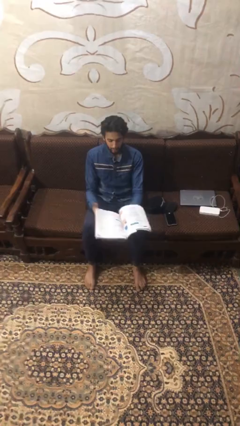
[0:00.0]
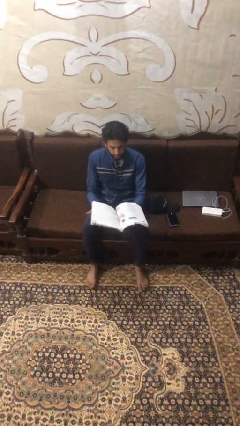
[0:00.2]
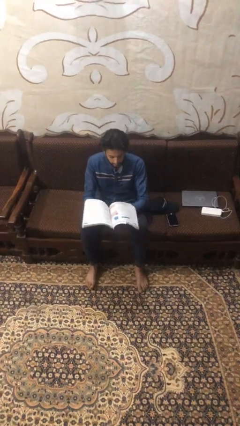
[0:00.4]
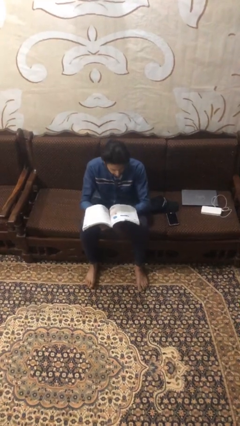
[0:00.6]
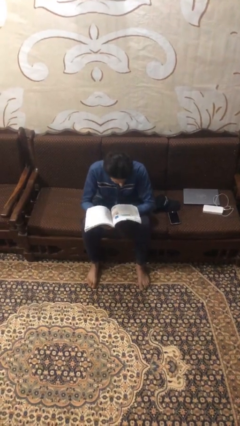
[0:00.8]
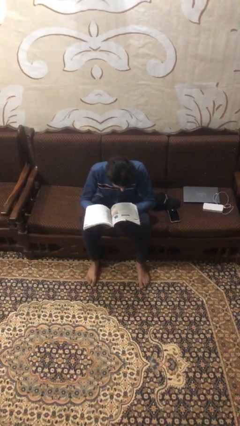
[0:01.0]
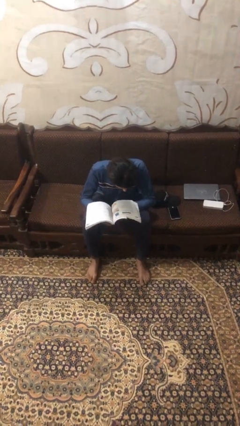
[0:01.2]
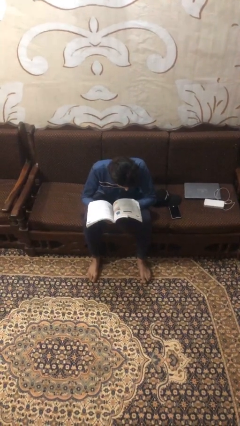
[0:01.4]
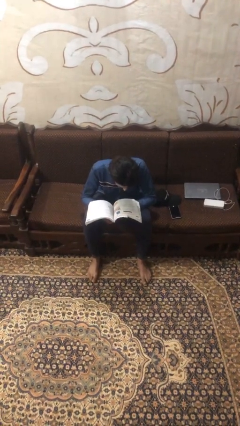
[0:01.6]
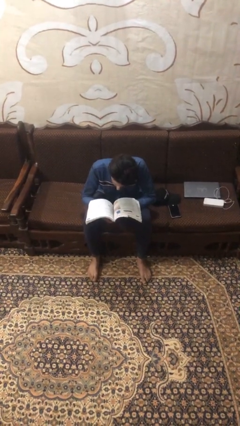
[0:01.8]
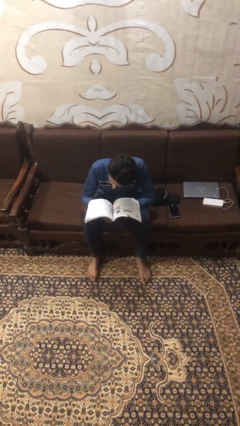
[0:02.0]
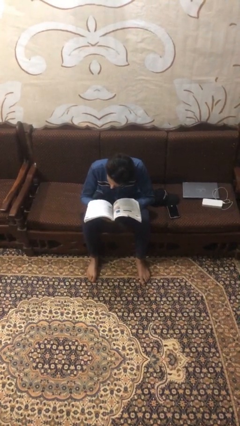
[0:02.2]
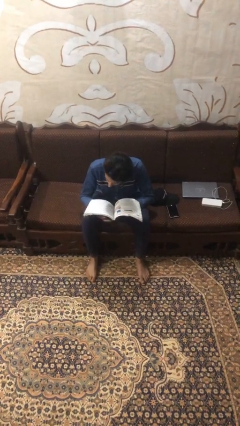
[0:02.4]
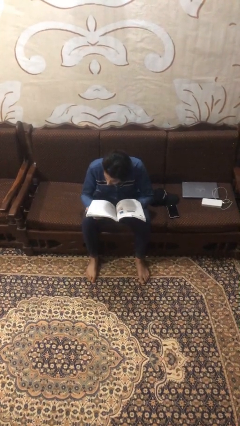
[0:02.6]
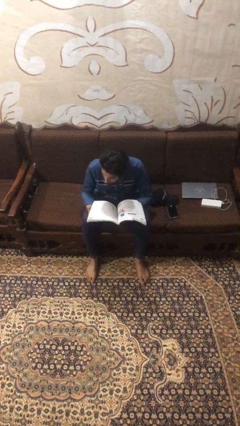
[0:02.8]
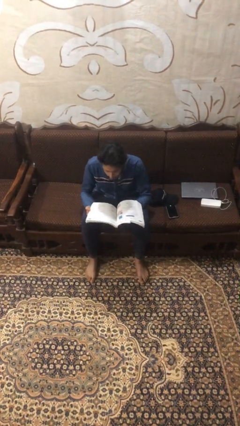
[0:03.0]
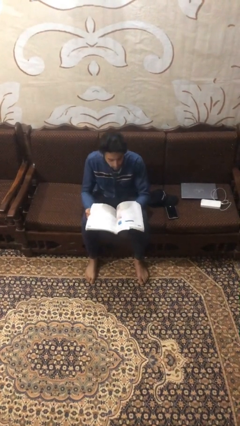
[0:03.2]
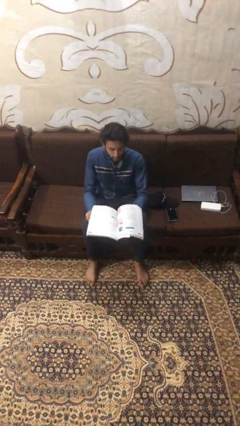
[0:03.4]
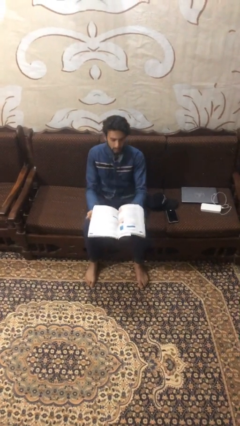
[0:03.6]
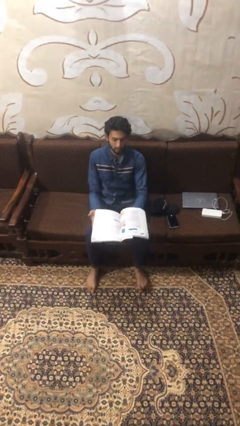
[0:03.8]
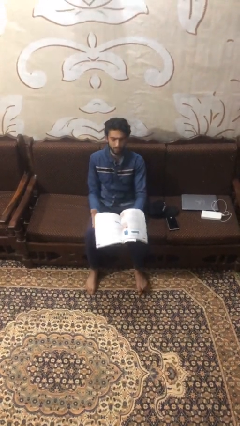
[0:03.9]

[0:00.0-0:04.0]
person reads document

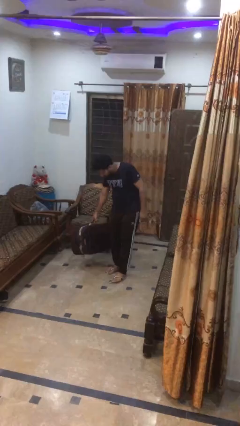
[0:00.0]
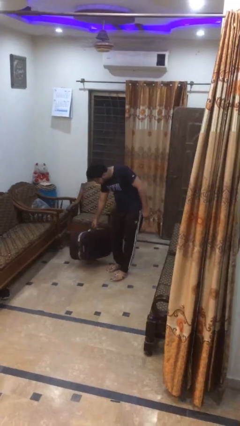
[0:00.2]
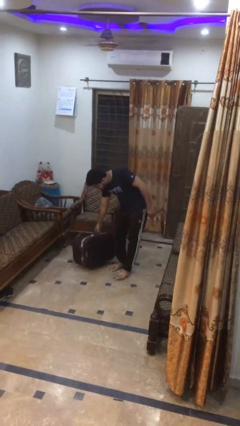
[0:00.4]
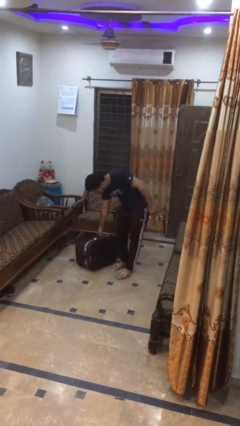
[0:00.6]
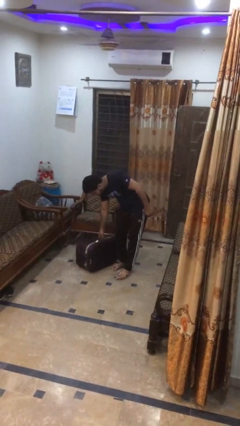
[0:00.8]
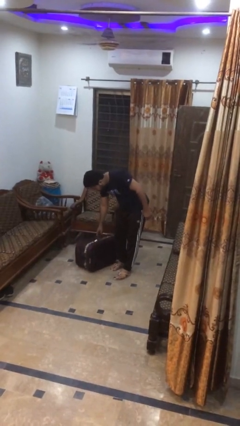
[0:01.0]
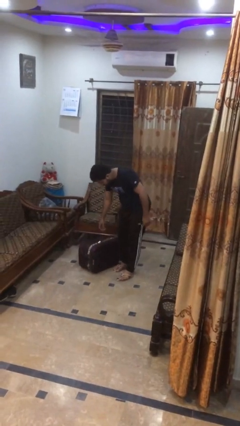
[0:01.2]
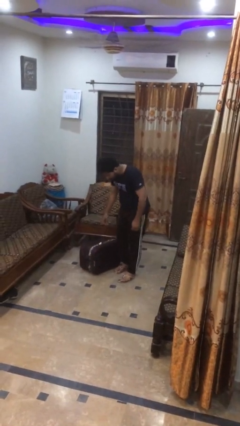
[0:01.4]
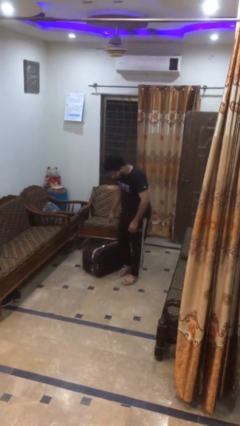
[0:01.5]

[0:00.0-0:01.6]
person puts down object on floor

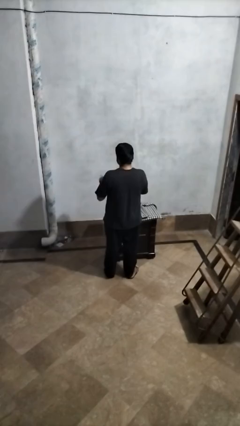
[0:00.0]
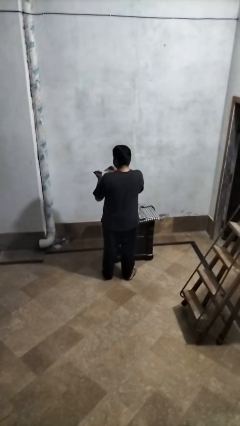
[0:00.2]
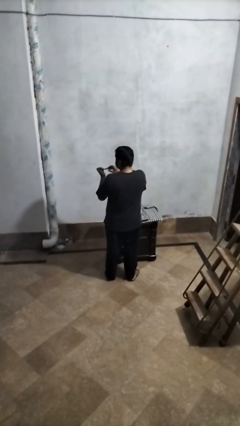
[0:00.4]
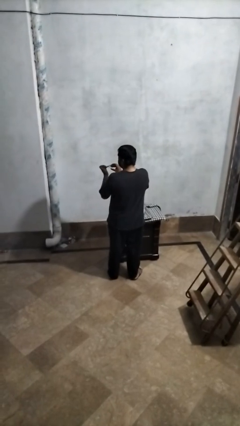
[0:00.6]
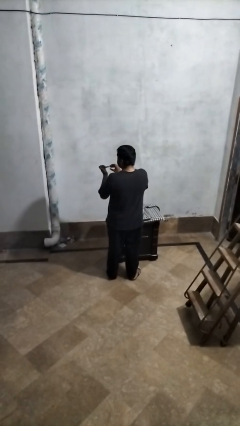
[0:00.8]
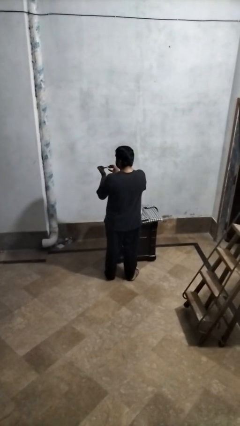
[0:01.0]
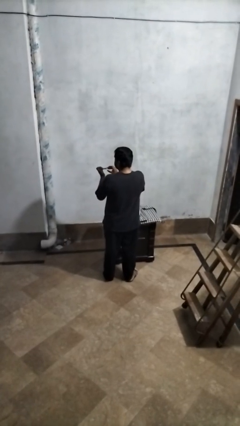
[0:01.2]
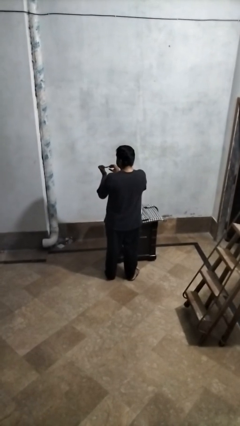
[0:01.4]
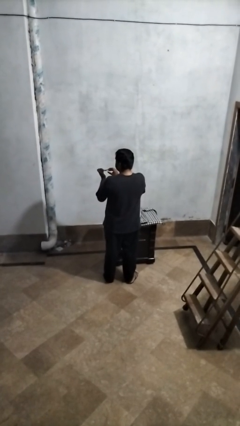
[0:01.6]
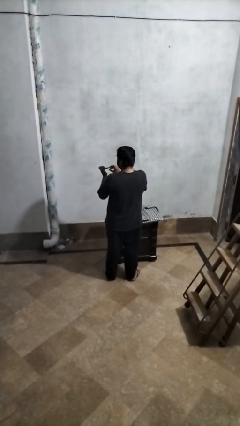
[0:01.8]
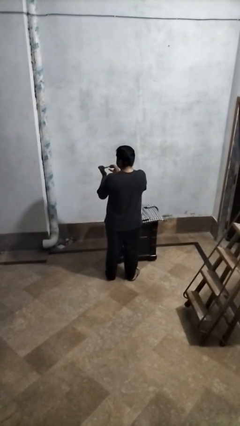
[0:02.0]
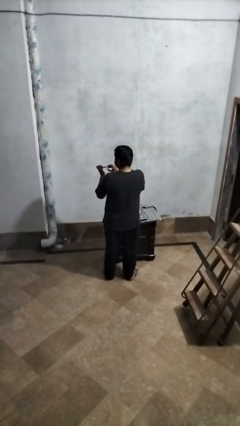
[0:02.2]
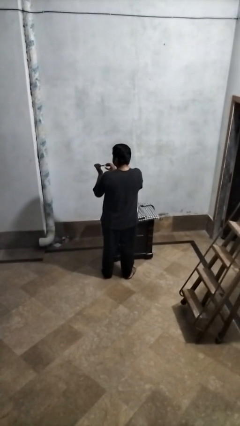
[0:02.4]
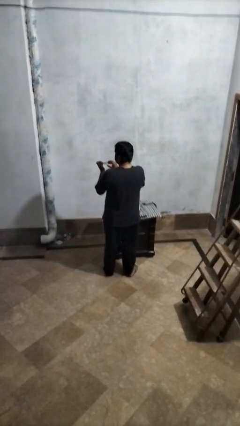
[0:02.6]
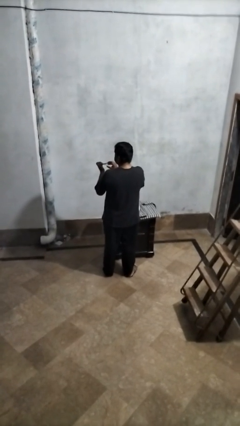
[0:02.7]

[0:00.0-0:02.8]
person clips fingernails

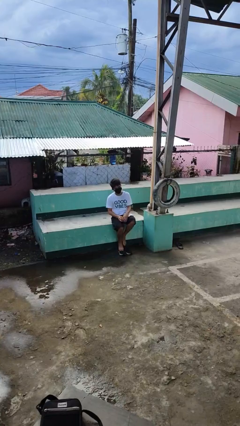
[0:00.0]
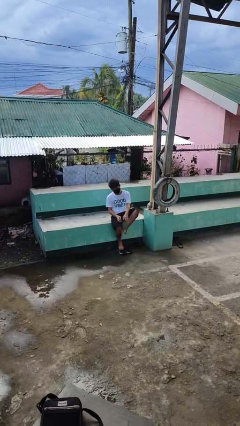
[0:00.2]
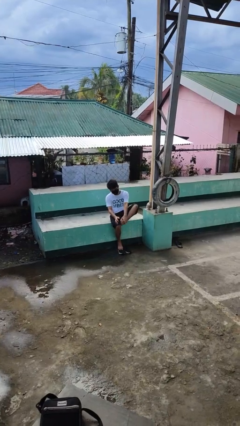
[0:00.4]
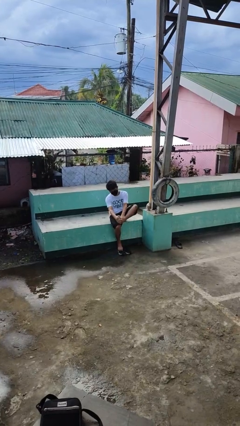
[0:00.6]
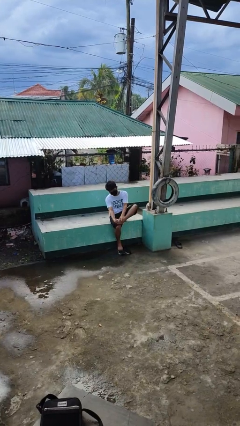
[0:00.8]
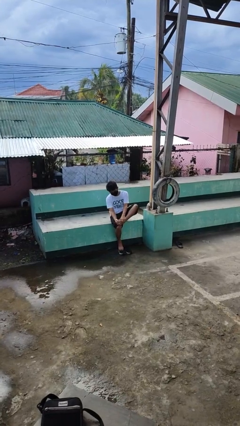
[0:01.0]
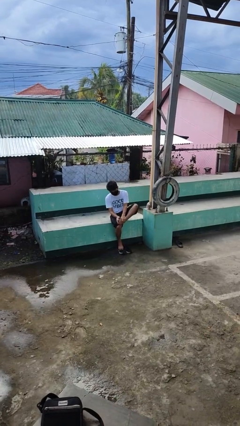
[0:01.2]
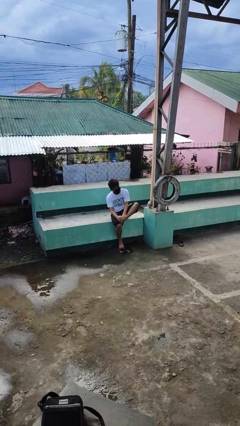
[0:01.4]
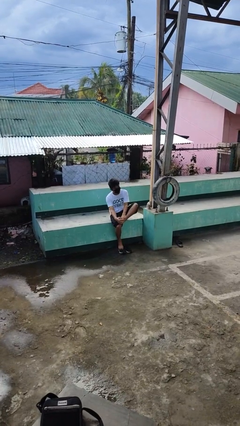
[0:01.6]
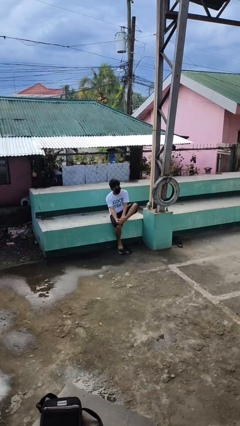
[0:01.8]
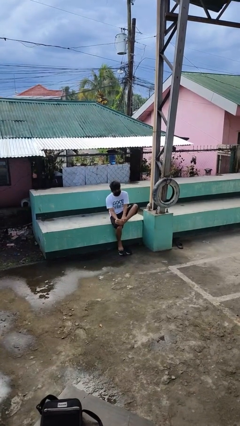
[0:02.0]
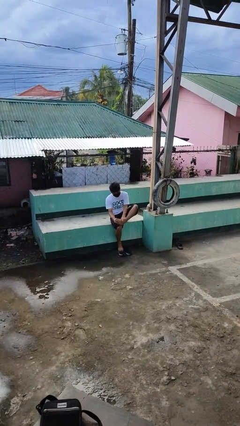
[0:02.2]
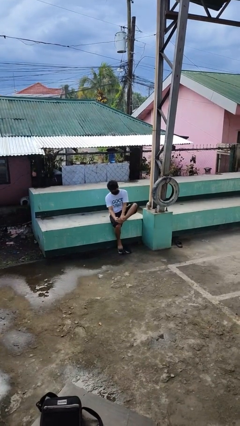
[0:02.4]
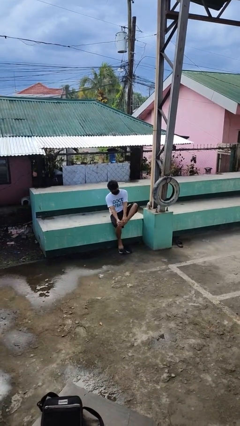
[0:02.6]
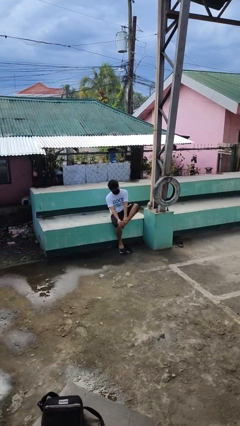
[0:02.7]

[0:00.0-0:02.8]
person rubs foot

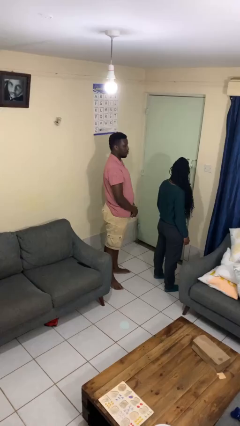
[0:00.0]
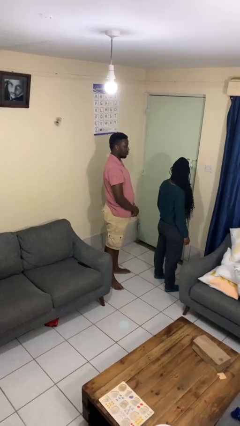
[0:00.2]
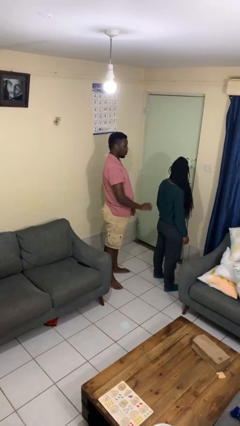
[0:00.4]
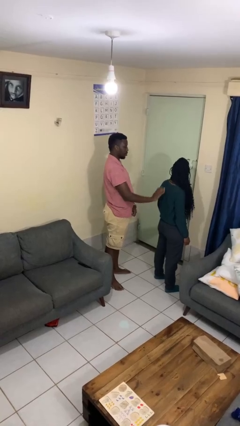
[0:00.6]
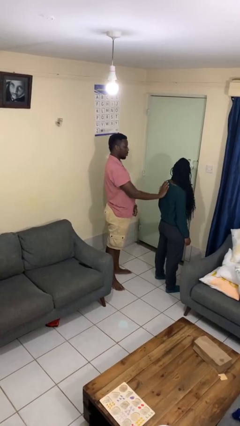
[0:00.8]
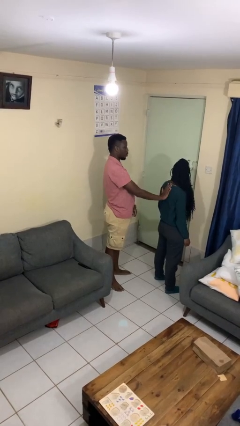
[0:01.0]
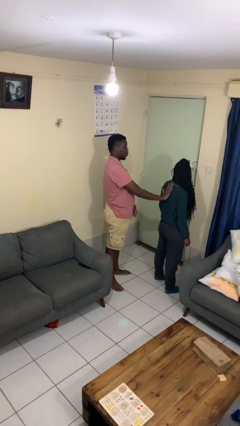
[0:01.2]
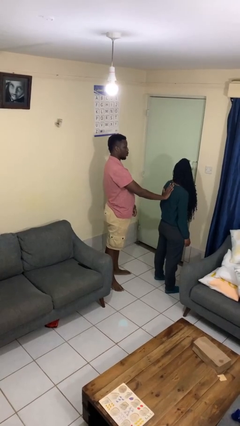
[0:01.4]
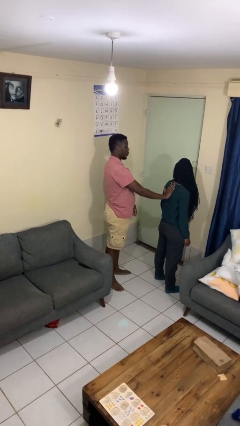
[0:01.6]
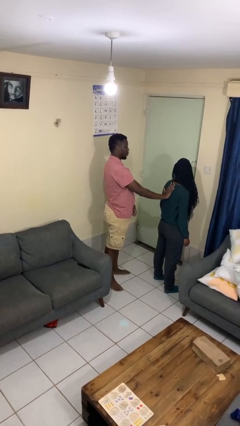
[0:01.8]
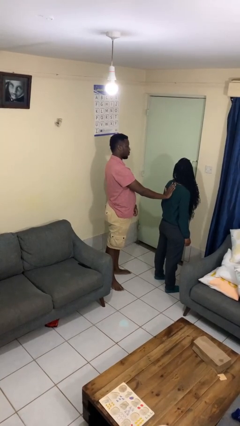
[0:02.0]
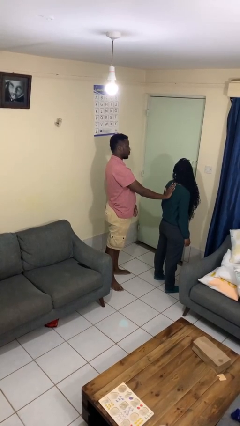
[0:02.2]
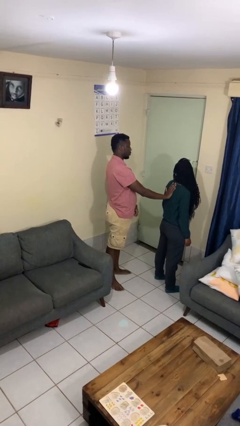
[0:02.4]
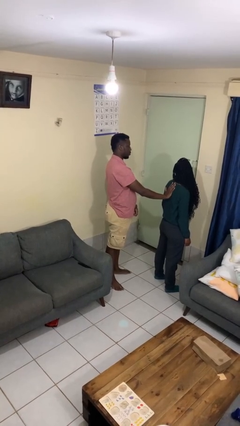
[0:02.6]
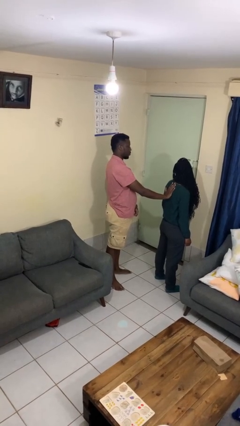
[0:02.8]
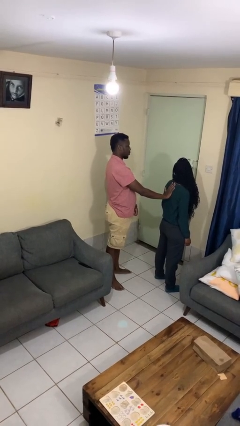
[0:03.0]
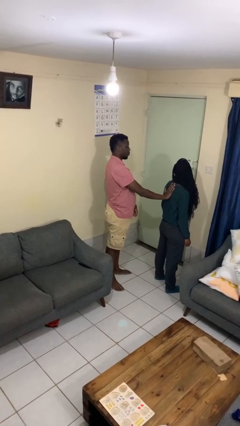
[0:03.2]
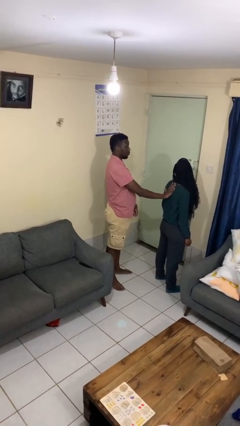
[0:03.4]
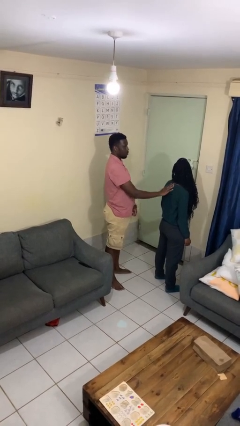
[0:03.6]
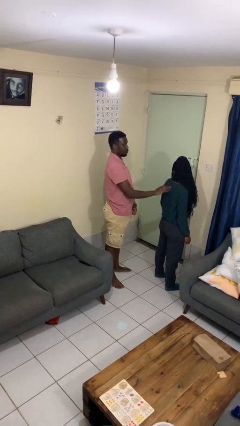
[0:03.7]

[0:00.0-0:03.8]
person touches back of person

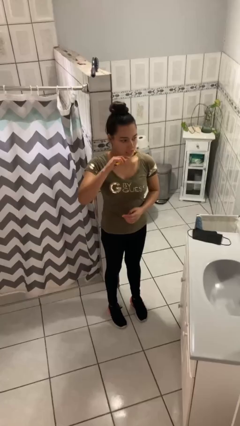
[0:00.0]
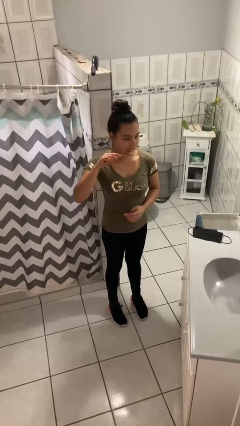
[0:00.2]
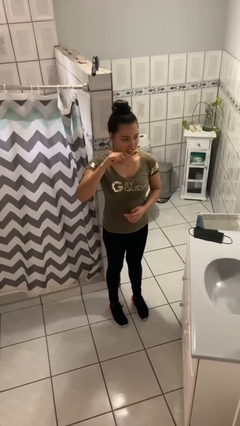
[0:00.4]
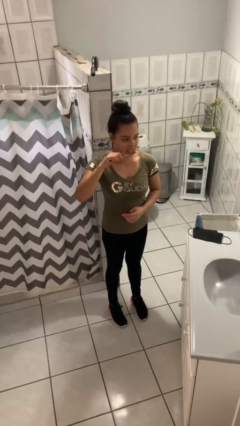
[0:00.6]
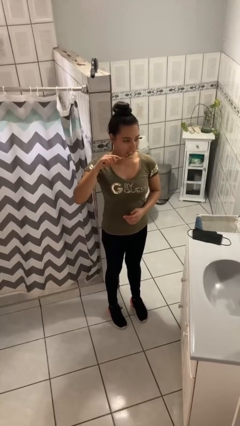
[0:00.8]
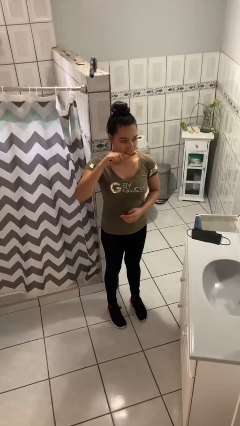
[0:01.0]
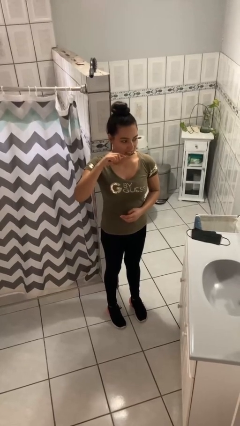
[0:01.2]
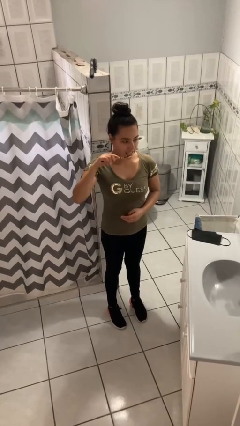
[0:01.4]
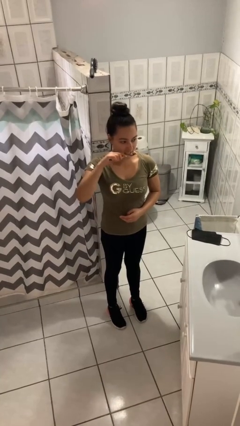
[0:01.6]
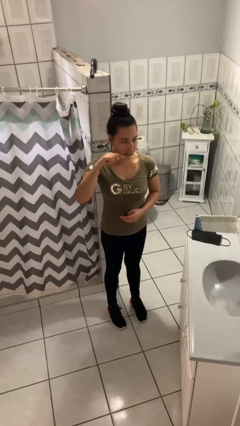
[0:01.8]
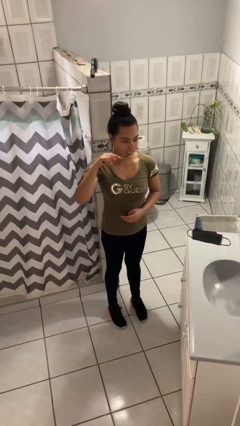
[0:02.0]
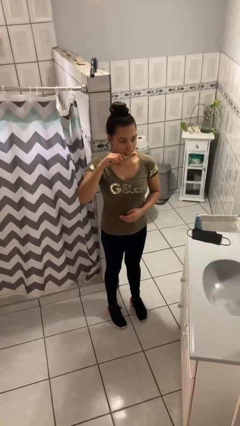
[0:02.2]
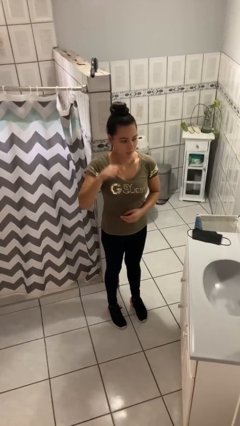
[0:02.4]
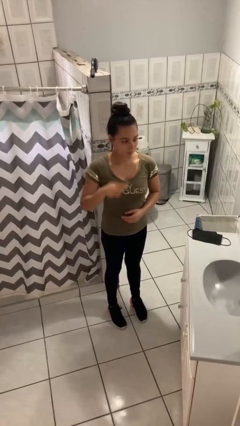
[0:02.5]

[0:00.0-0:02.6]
person brushes teeth
